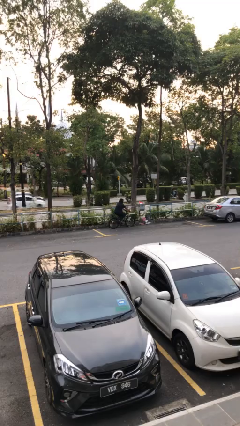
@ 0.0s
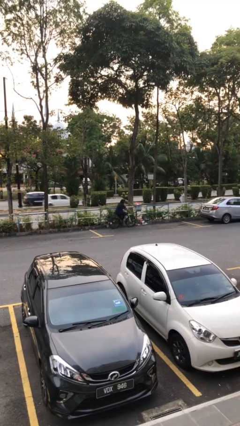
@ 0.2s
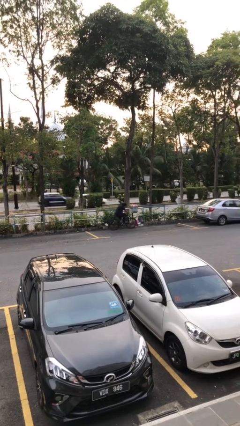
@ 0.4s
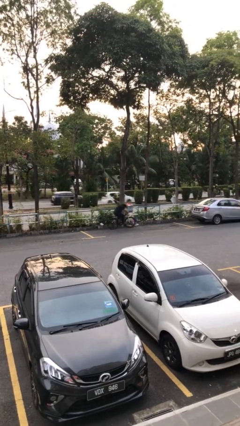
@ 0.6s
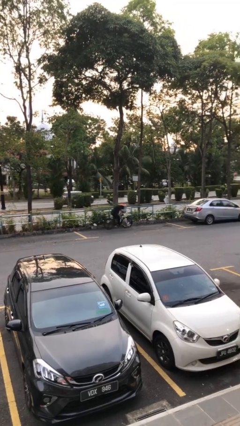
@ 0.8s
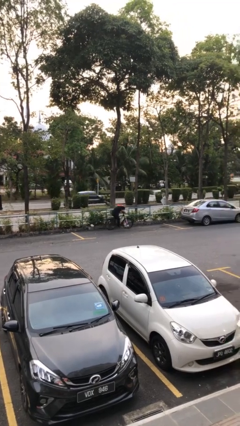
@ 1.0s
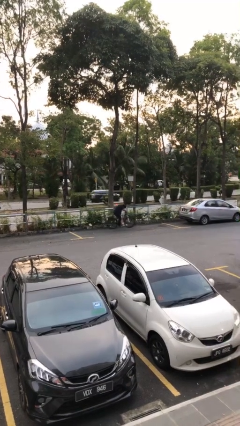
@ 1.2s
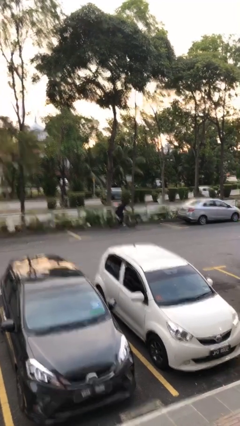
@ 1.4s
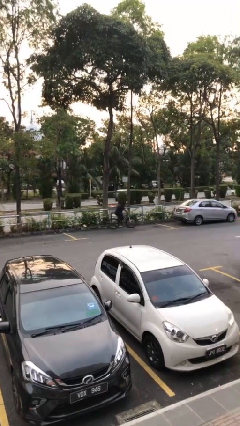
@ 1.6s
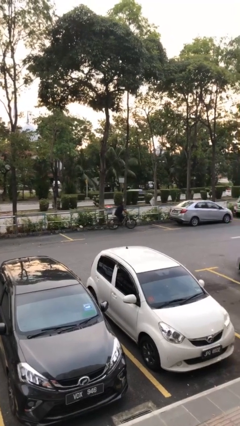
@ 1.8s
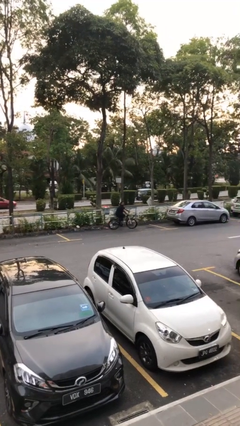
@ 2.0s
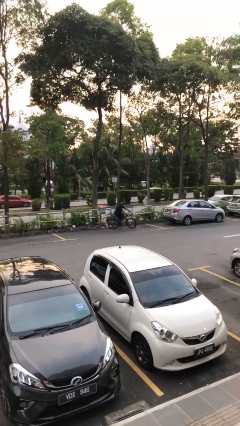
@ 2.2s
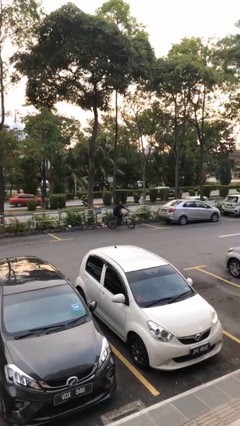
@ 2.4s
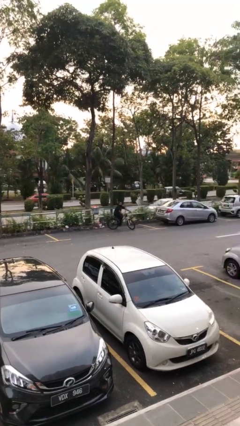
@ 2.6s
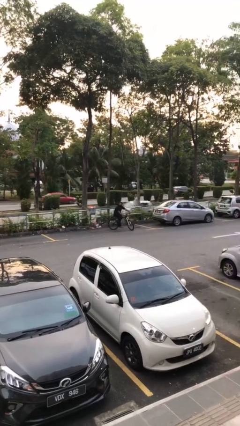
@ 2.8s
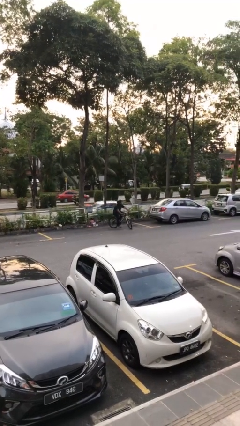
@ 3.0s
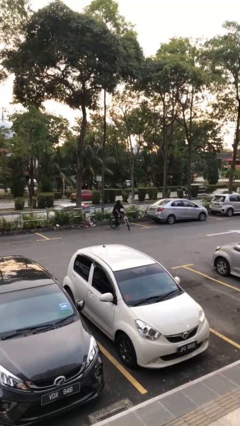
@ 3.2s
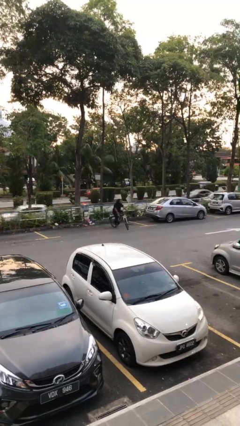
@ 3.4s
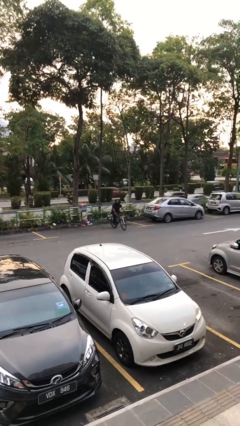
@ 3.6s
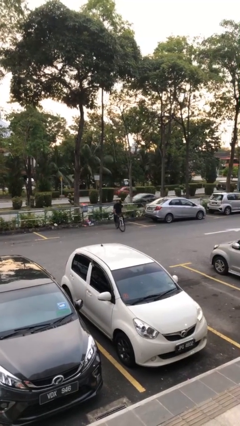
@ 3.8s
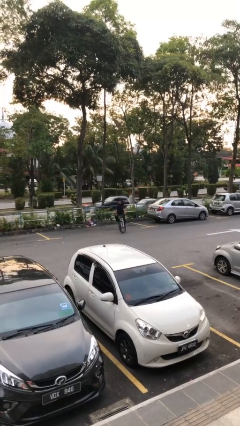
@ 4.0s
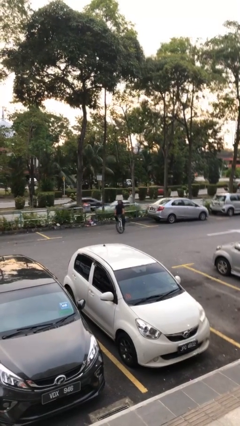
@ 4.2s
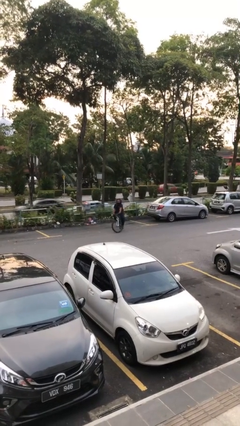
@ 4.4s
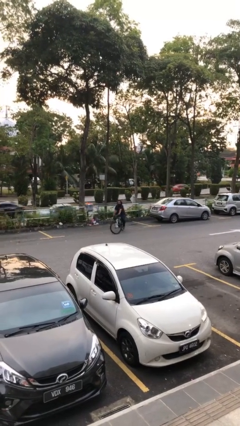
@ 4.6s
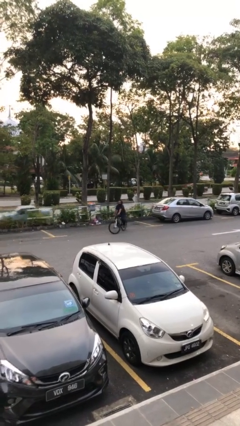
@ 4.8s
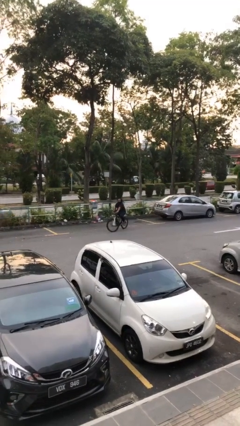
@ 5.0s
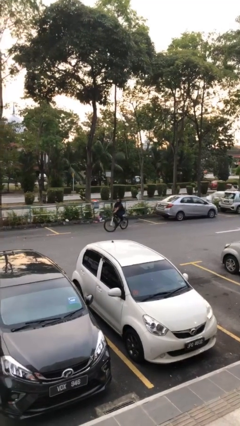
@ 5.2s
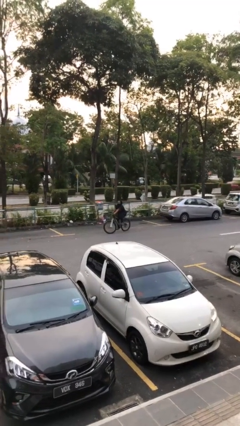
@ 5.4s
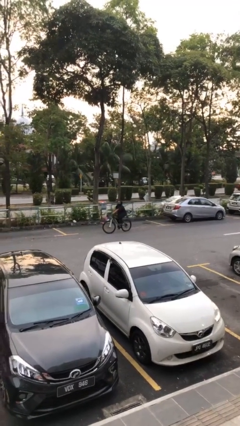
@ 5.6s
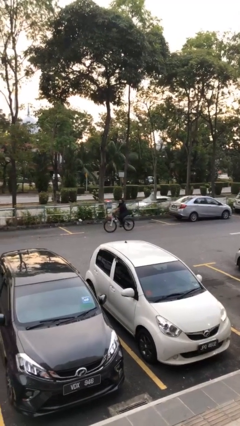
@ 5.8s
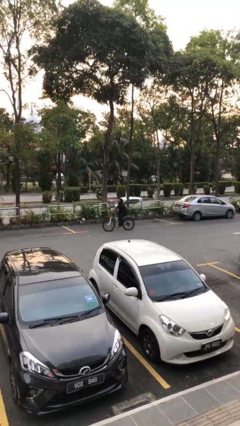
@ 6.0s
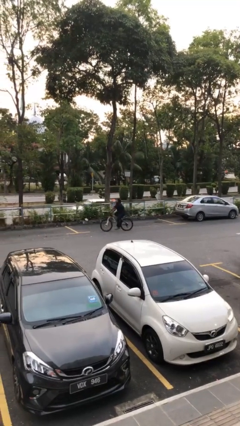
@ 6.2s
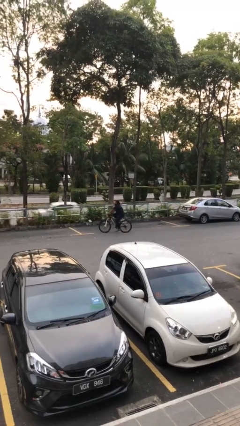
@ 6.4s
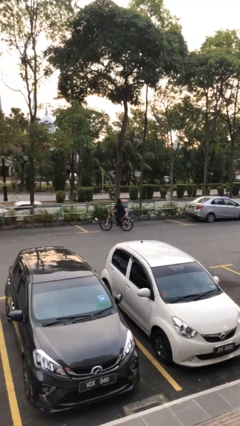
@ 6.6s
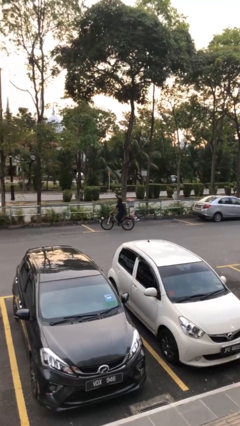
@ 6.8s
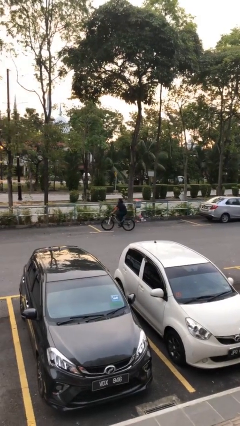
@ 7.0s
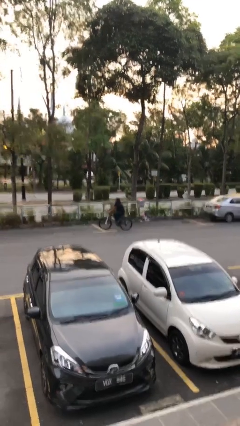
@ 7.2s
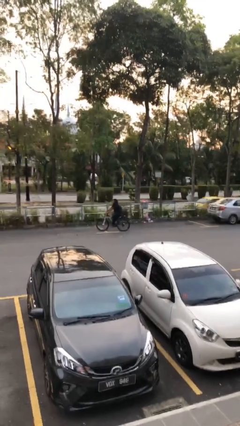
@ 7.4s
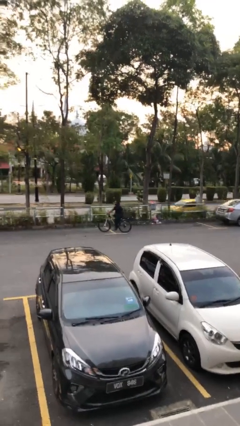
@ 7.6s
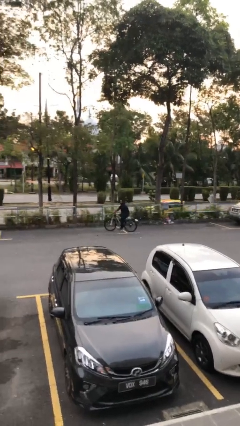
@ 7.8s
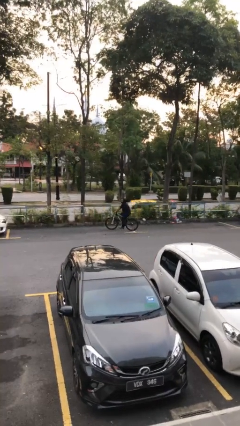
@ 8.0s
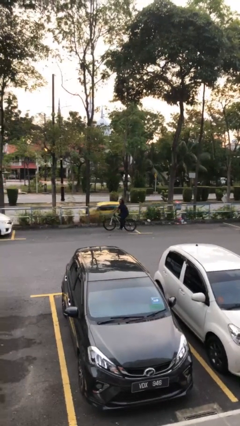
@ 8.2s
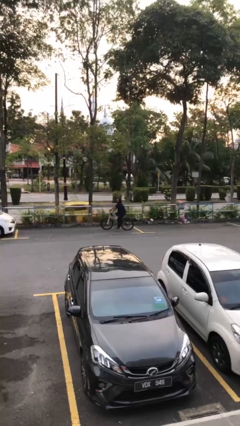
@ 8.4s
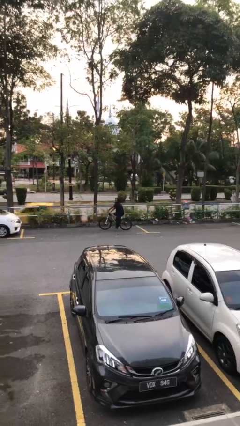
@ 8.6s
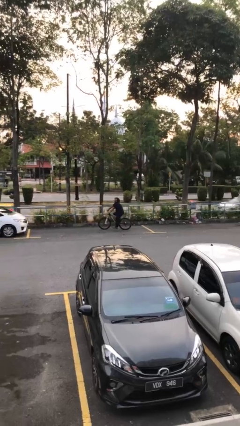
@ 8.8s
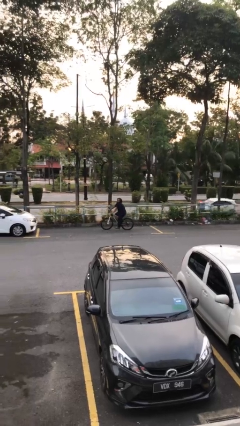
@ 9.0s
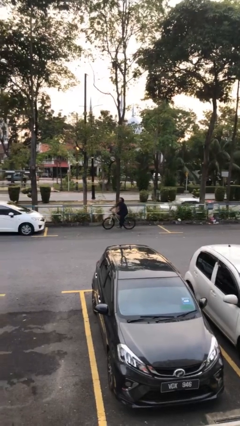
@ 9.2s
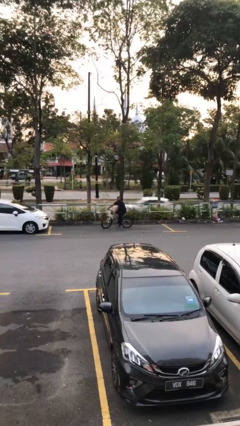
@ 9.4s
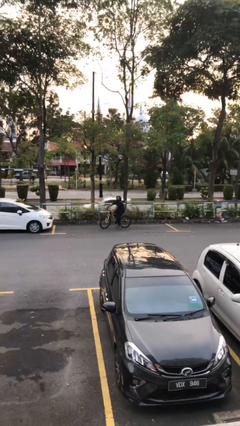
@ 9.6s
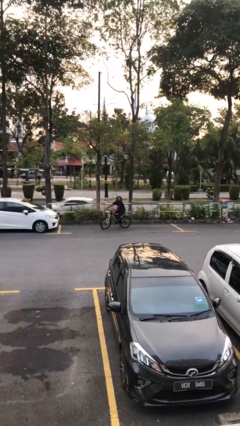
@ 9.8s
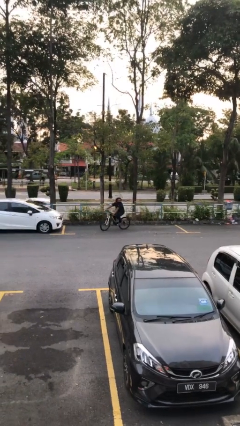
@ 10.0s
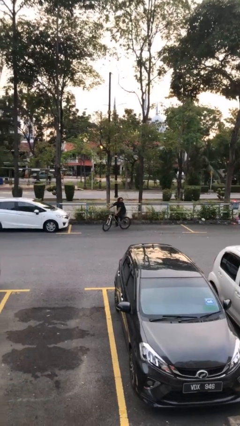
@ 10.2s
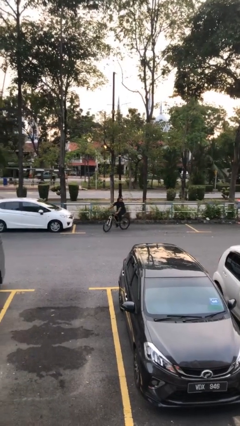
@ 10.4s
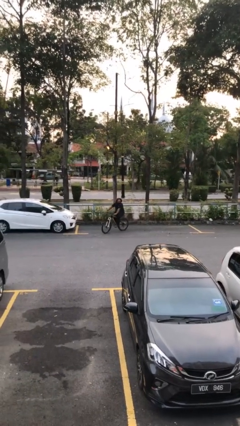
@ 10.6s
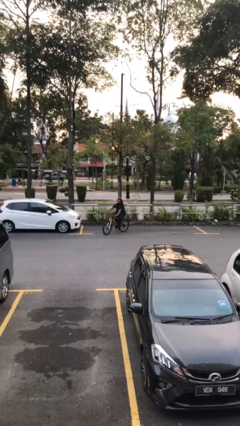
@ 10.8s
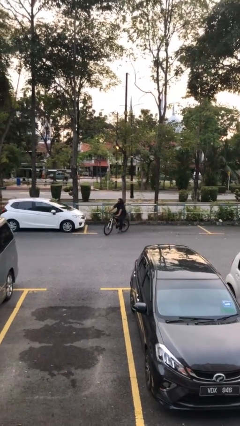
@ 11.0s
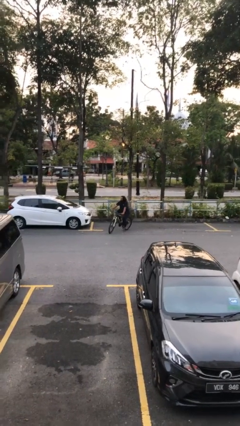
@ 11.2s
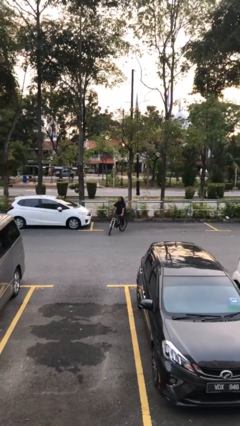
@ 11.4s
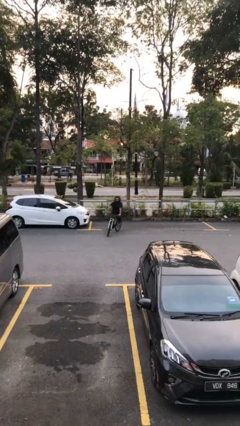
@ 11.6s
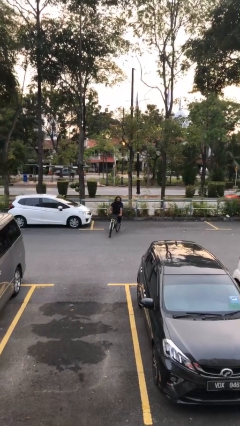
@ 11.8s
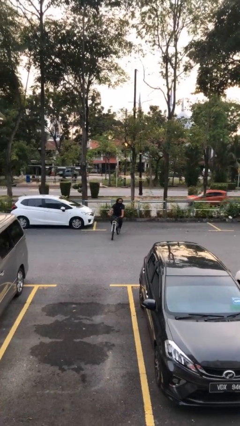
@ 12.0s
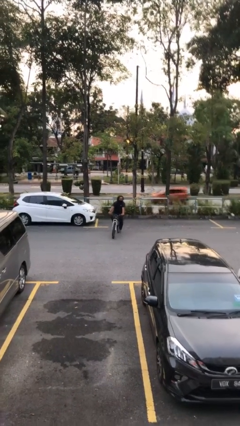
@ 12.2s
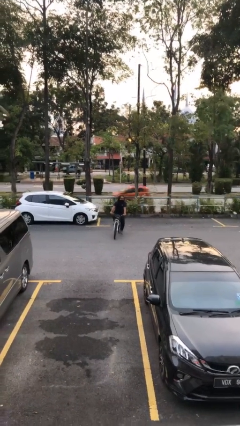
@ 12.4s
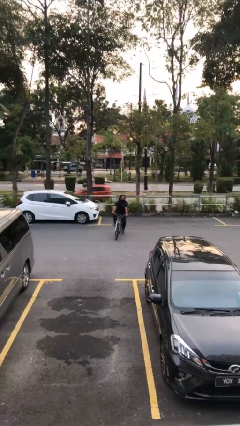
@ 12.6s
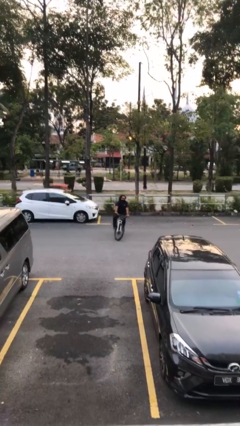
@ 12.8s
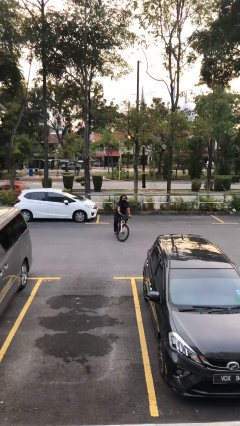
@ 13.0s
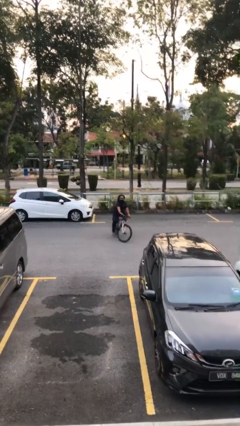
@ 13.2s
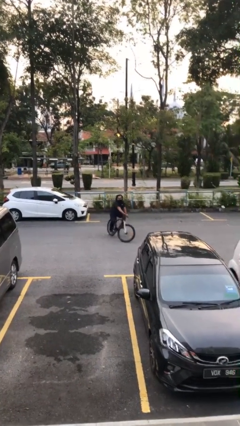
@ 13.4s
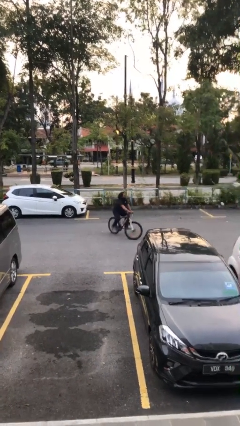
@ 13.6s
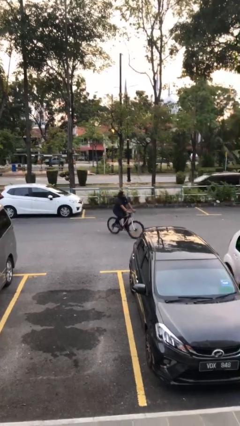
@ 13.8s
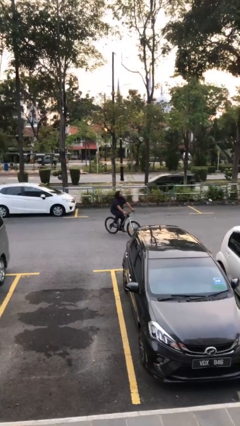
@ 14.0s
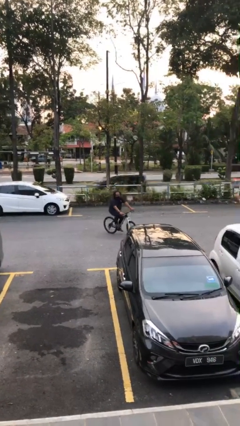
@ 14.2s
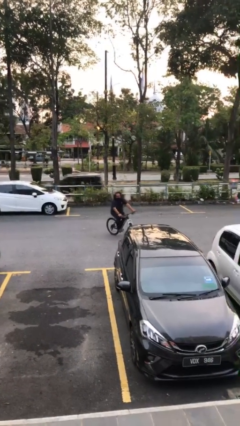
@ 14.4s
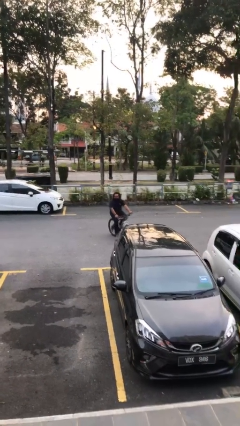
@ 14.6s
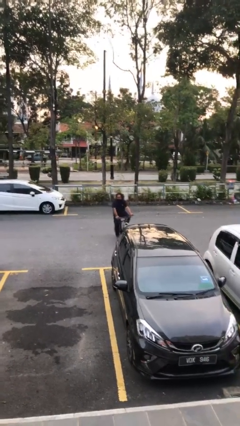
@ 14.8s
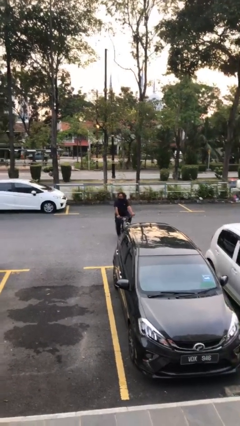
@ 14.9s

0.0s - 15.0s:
person rides bicycle

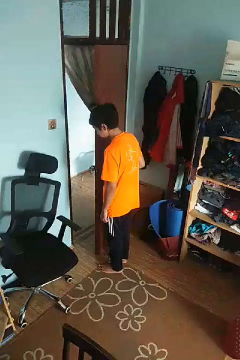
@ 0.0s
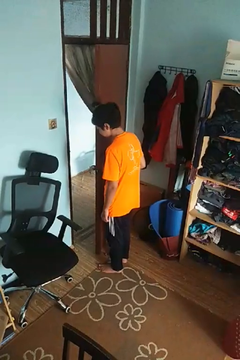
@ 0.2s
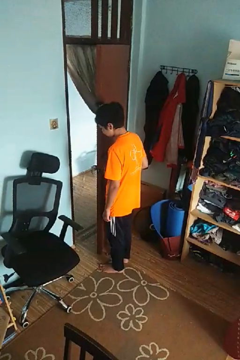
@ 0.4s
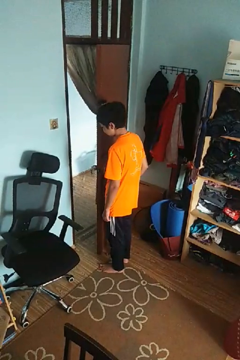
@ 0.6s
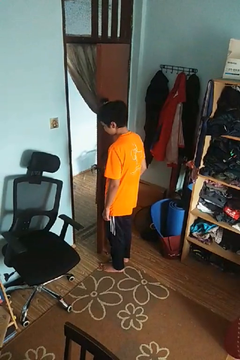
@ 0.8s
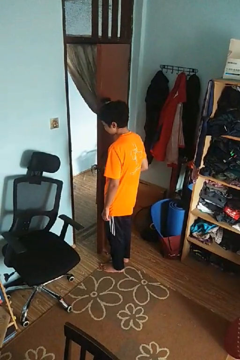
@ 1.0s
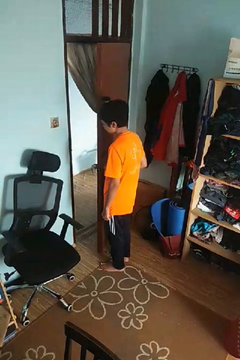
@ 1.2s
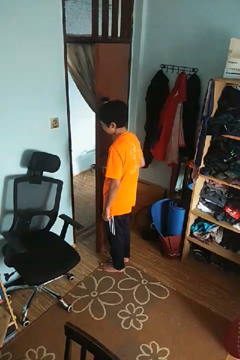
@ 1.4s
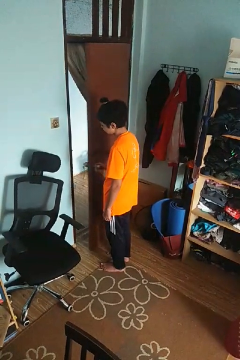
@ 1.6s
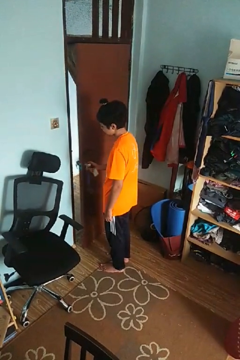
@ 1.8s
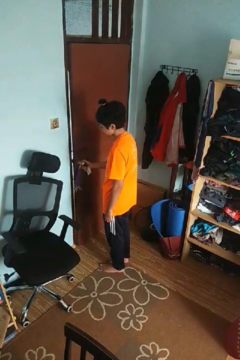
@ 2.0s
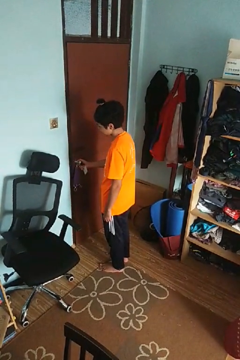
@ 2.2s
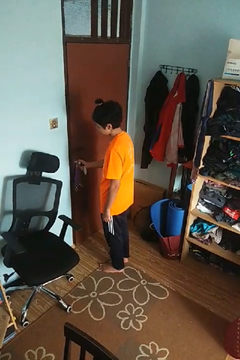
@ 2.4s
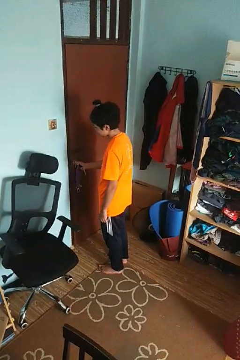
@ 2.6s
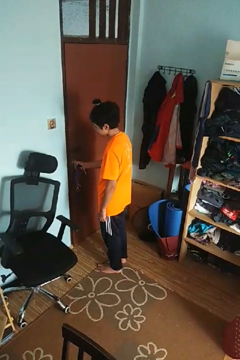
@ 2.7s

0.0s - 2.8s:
person closes facility door

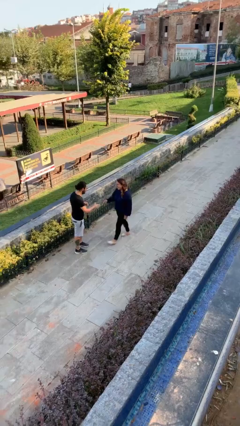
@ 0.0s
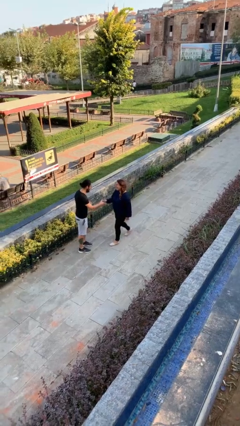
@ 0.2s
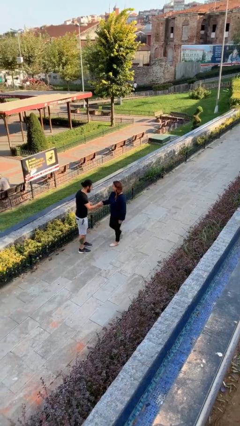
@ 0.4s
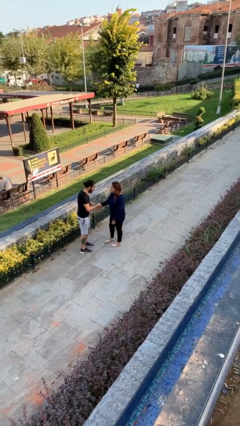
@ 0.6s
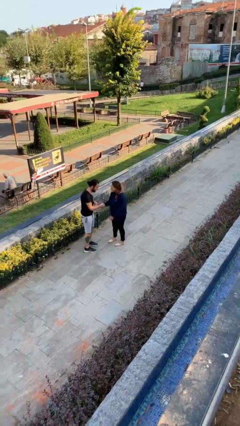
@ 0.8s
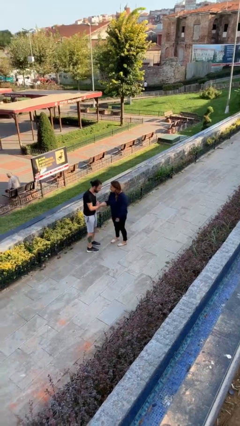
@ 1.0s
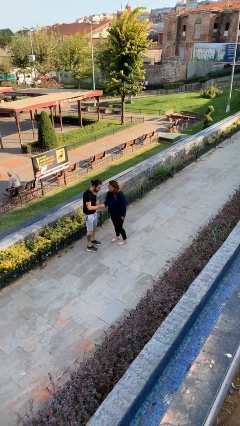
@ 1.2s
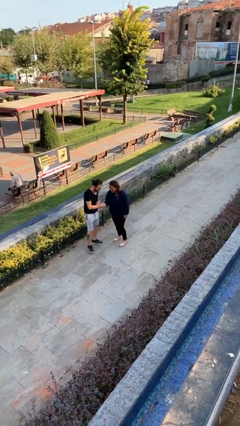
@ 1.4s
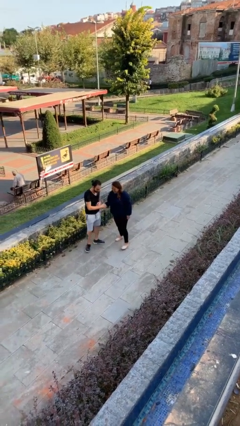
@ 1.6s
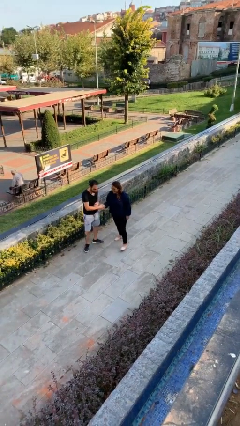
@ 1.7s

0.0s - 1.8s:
person shakes hand
